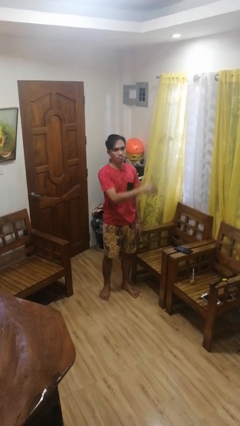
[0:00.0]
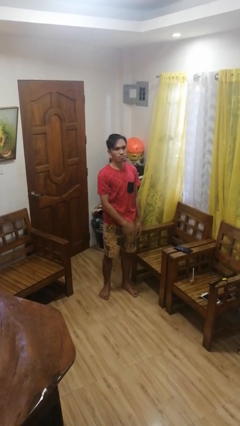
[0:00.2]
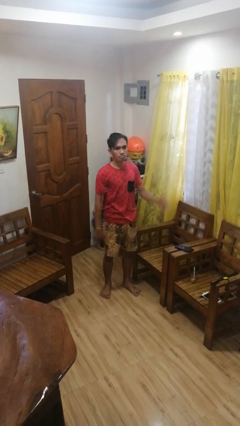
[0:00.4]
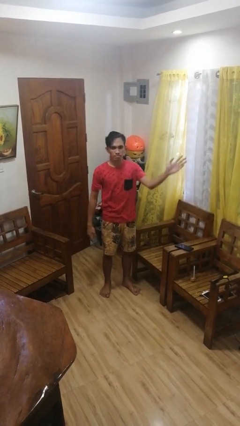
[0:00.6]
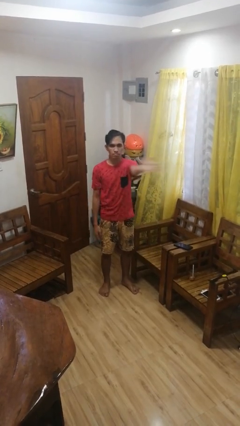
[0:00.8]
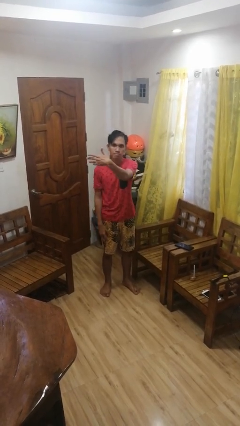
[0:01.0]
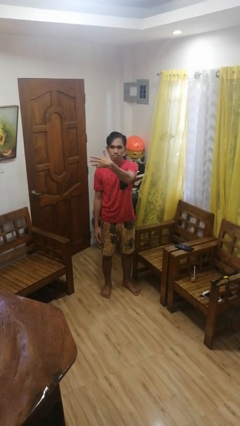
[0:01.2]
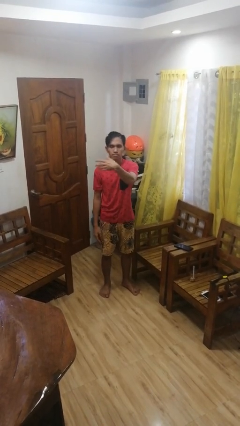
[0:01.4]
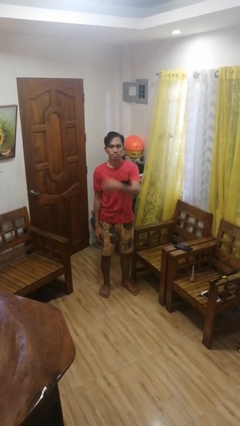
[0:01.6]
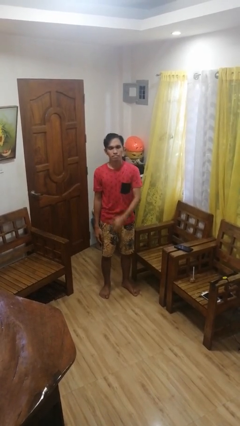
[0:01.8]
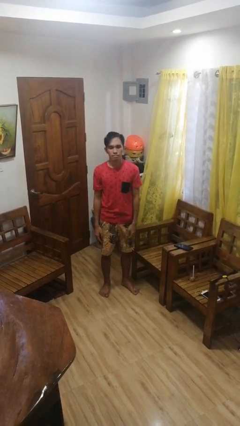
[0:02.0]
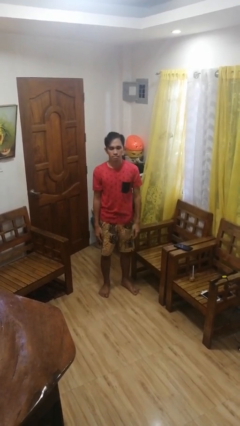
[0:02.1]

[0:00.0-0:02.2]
person gestures swipe right

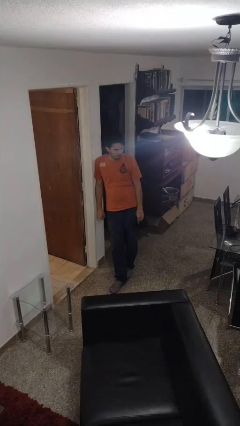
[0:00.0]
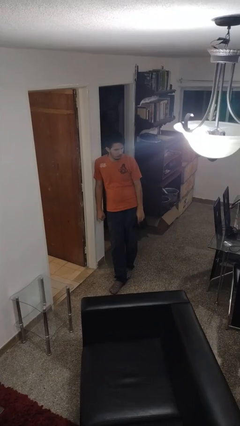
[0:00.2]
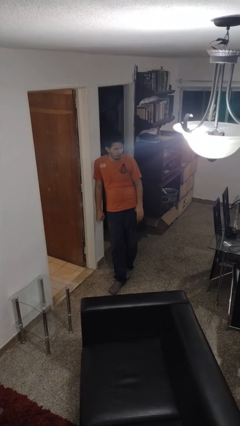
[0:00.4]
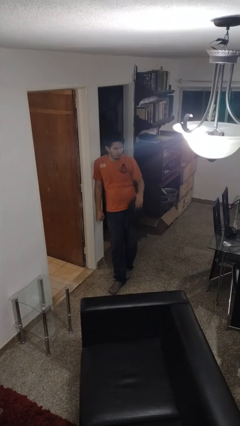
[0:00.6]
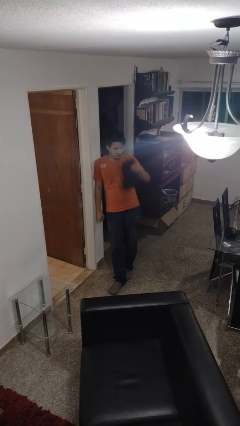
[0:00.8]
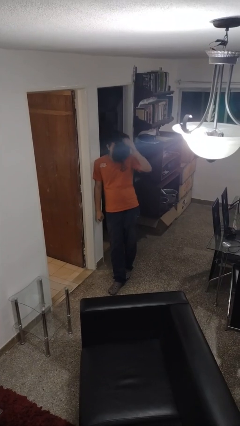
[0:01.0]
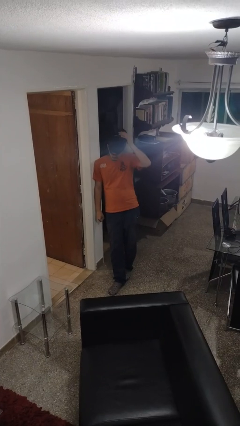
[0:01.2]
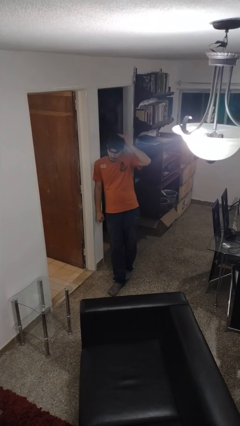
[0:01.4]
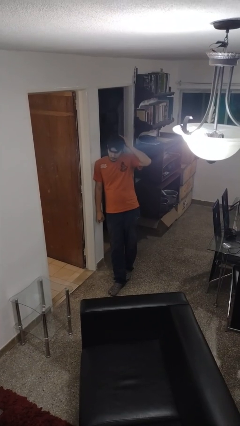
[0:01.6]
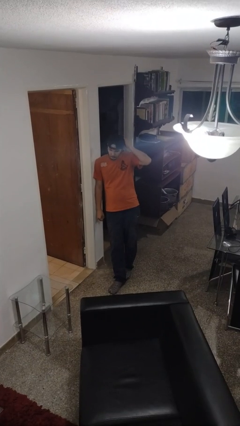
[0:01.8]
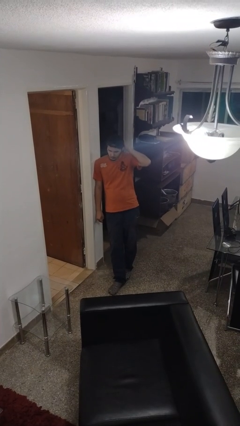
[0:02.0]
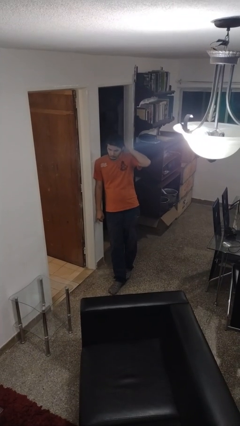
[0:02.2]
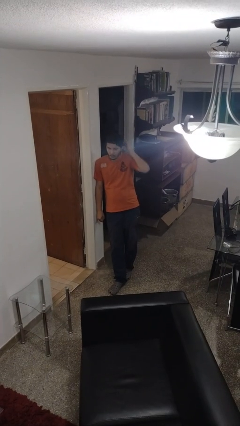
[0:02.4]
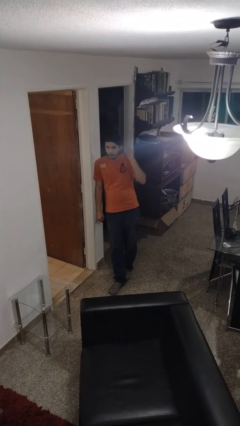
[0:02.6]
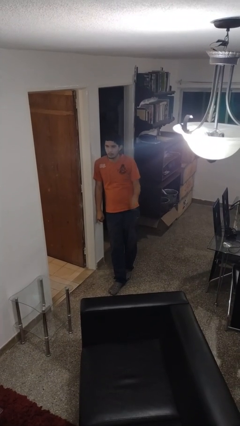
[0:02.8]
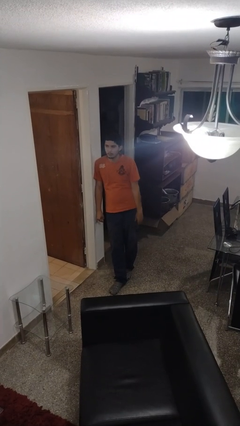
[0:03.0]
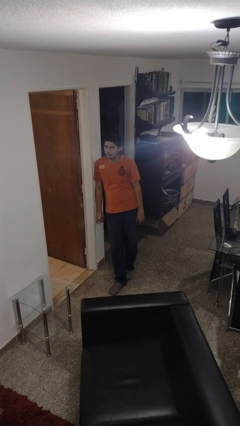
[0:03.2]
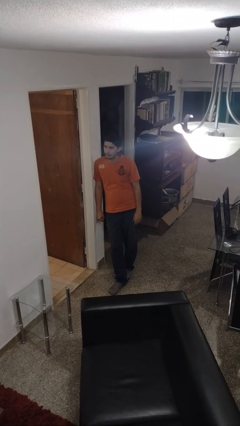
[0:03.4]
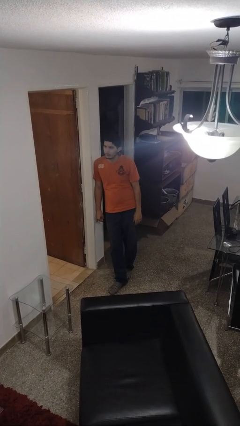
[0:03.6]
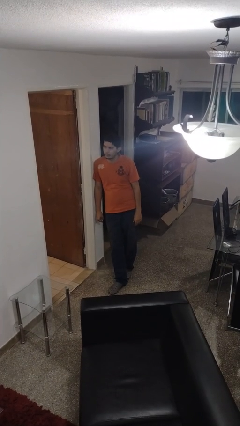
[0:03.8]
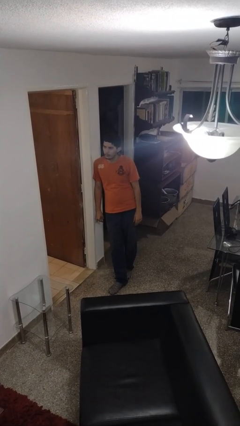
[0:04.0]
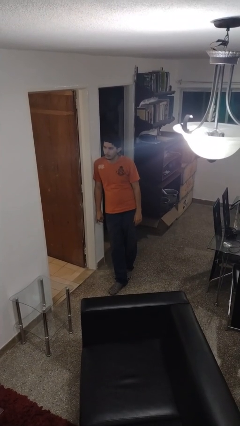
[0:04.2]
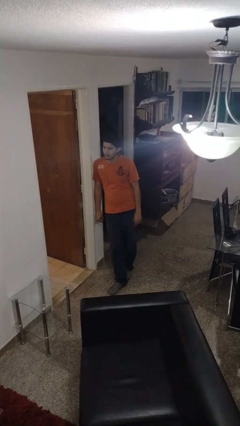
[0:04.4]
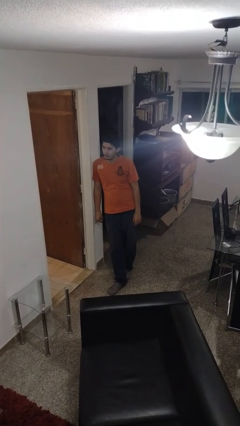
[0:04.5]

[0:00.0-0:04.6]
person puts on hat

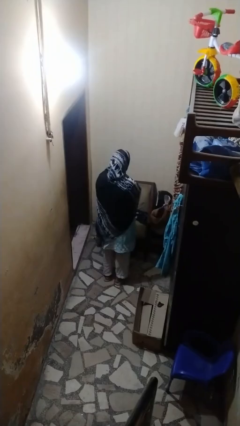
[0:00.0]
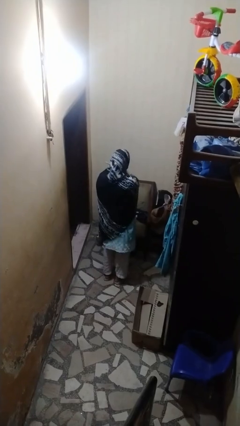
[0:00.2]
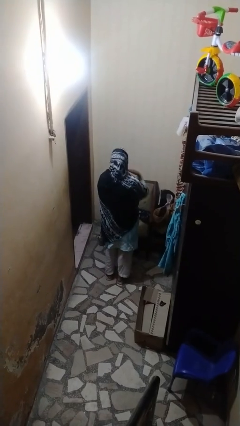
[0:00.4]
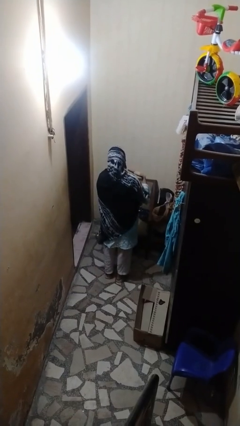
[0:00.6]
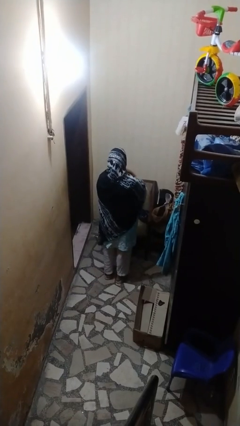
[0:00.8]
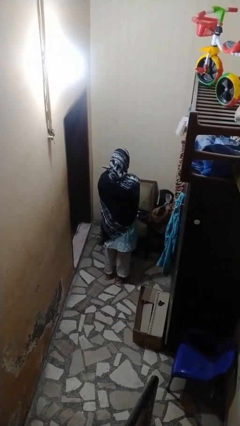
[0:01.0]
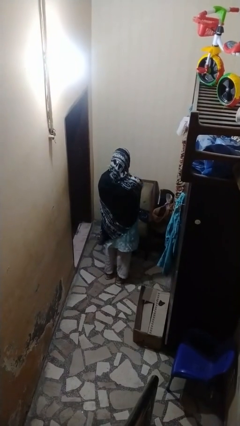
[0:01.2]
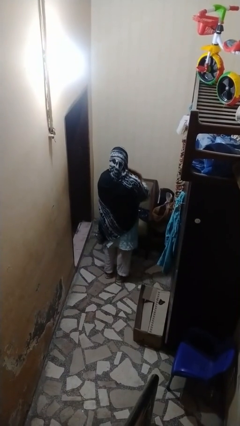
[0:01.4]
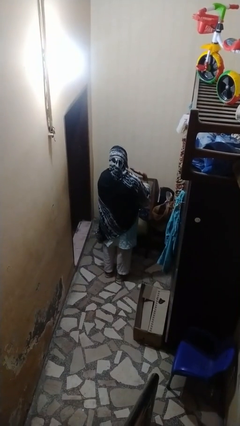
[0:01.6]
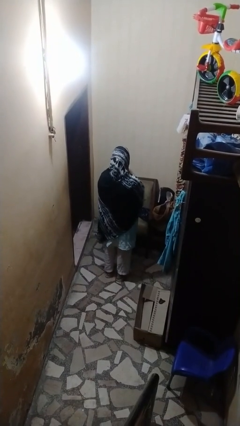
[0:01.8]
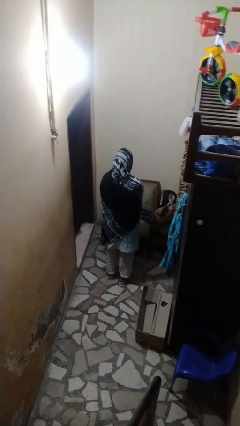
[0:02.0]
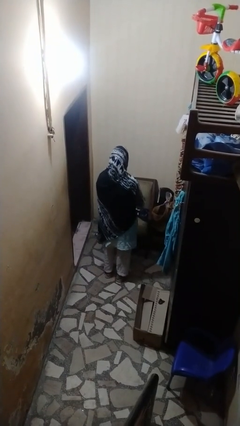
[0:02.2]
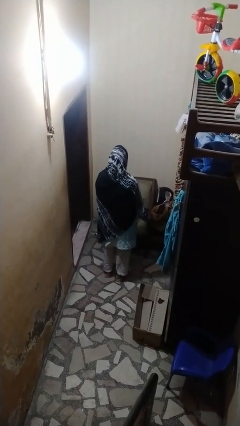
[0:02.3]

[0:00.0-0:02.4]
person gestures cut

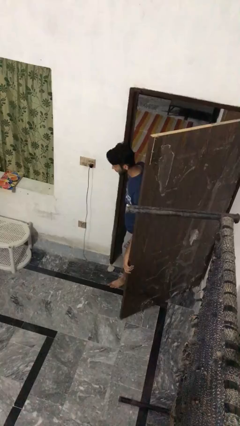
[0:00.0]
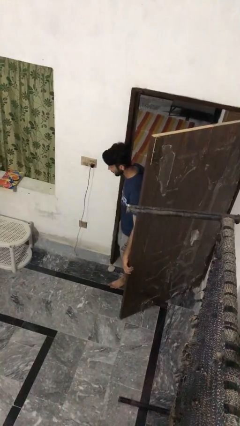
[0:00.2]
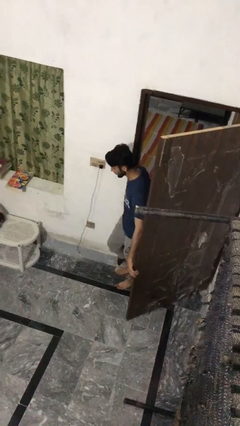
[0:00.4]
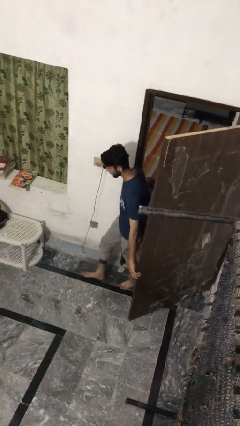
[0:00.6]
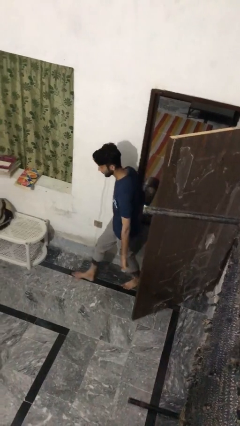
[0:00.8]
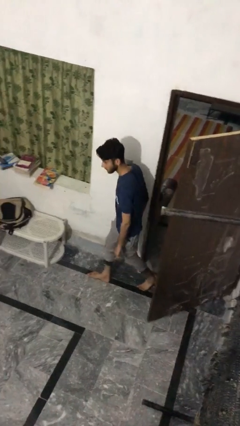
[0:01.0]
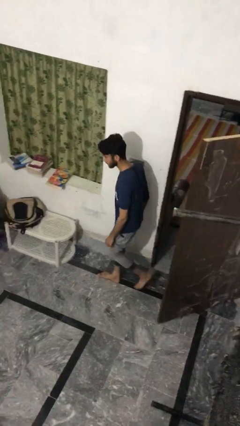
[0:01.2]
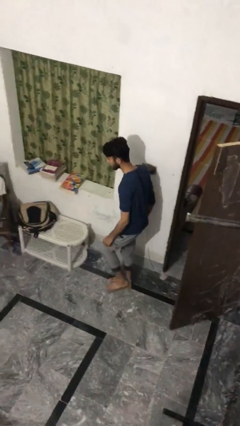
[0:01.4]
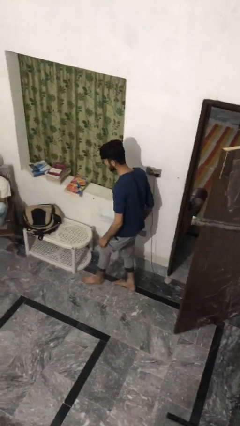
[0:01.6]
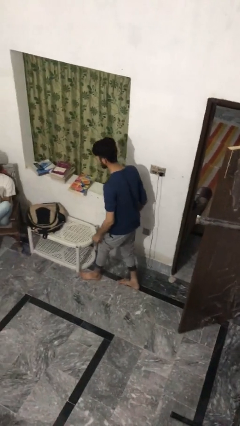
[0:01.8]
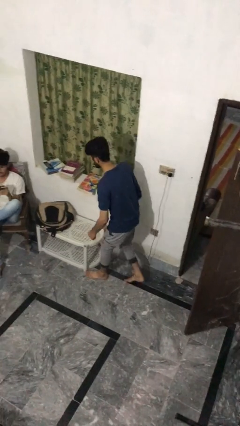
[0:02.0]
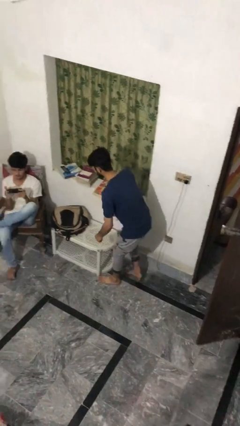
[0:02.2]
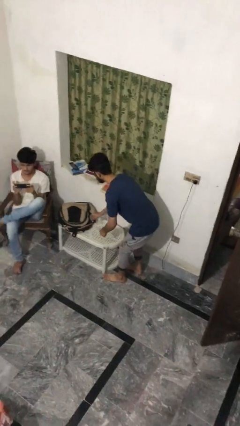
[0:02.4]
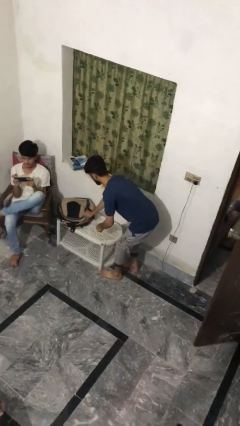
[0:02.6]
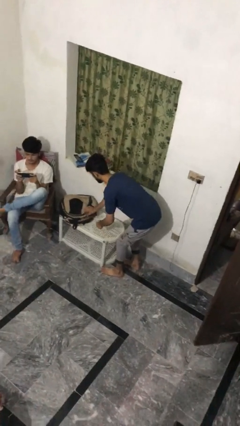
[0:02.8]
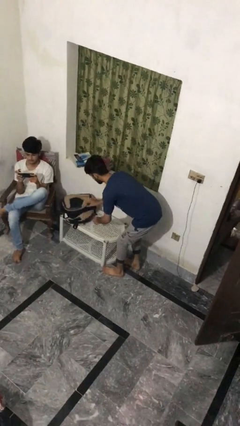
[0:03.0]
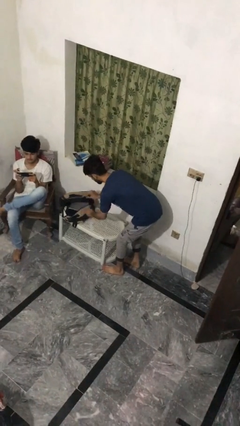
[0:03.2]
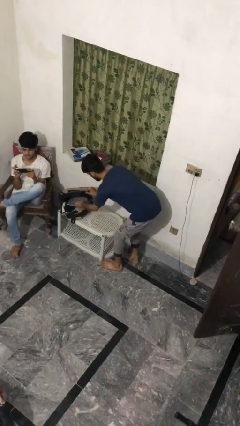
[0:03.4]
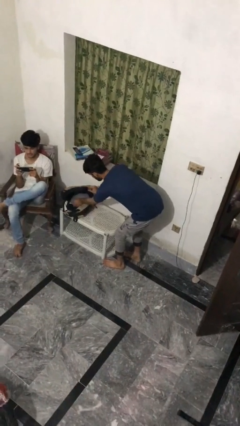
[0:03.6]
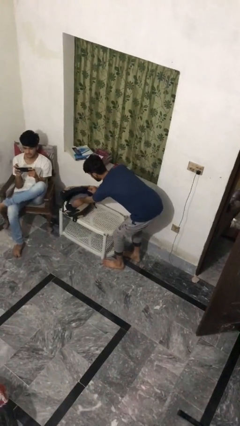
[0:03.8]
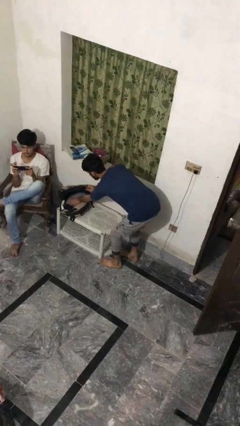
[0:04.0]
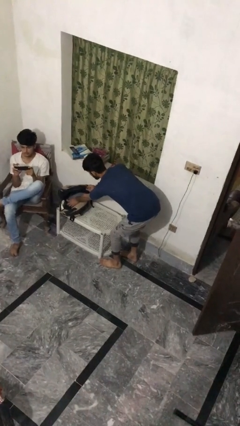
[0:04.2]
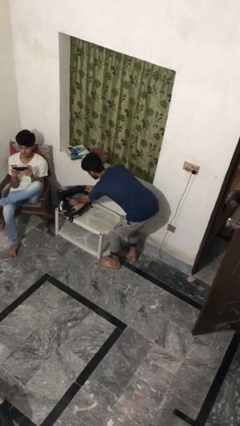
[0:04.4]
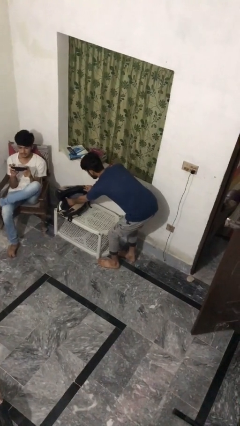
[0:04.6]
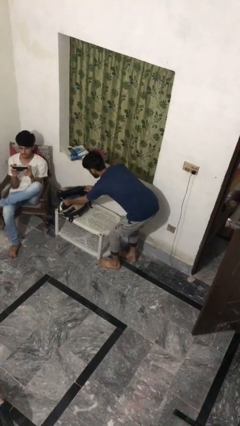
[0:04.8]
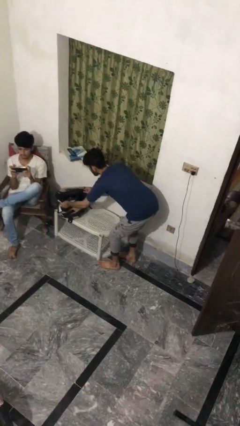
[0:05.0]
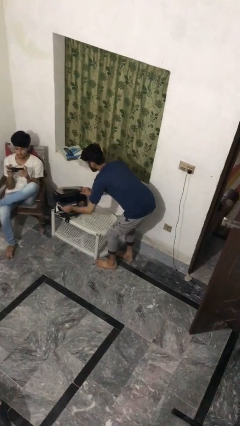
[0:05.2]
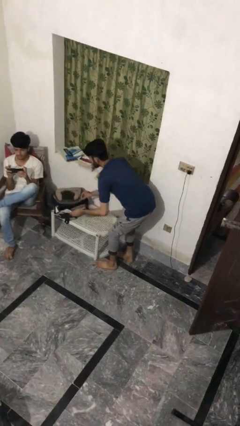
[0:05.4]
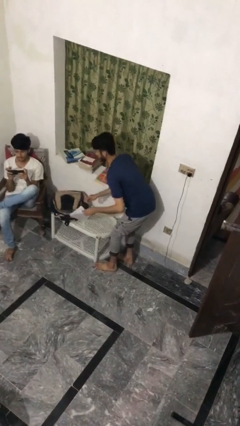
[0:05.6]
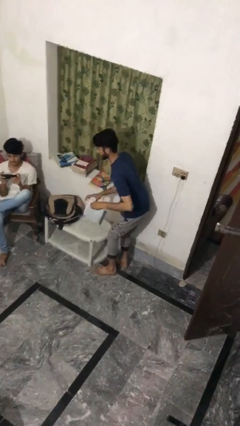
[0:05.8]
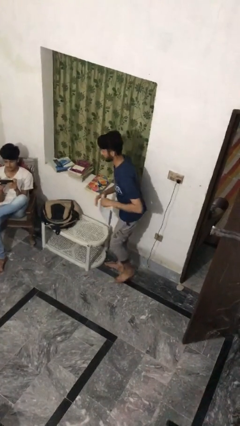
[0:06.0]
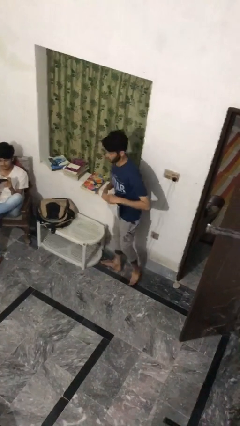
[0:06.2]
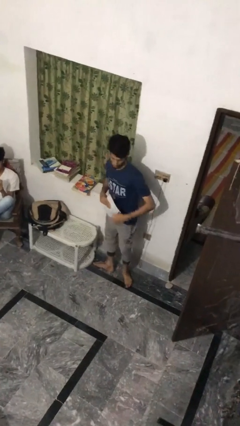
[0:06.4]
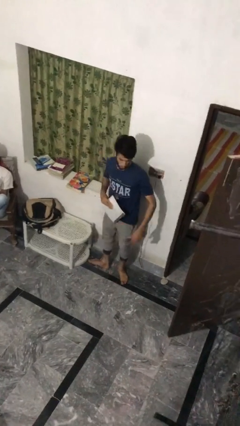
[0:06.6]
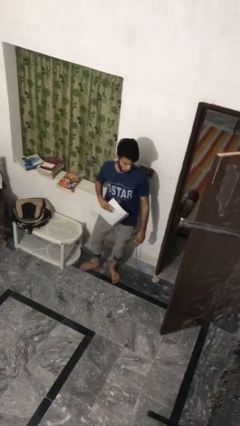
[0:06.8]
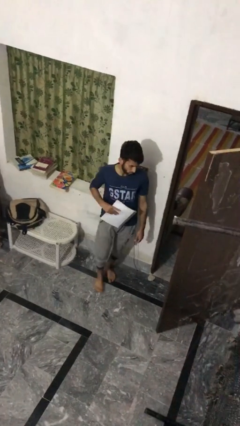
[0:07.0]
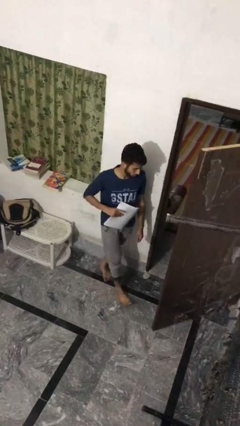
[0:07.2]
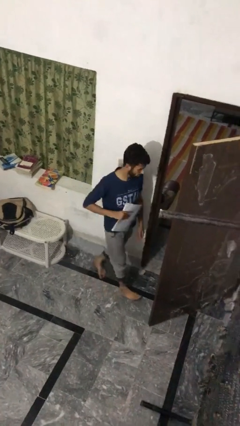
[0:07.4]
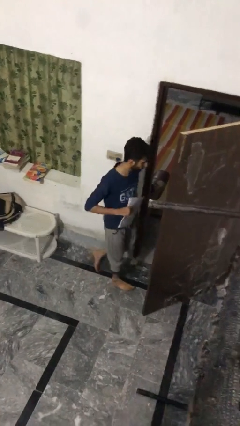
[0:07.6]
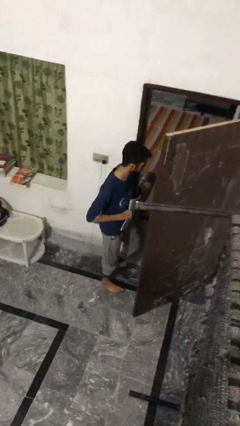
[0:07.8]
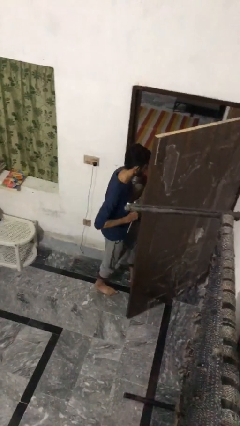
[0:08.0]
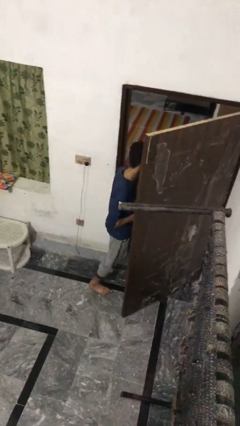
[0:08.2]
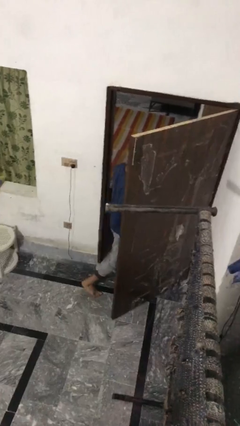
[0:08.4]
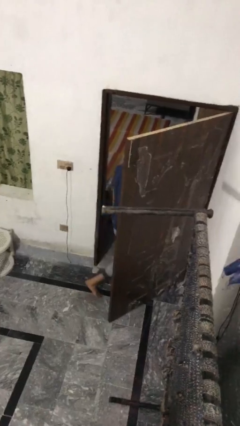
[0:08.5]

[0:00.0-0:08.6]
person steals object from person

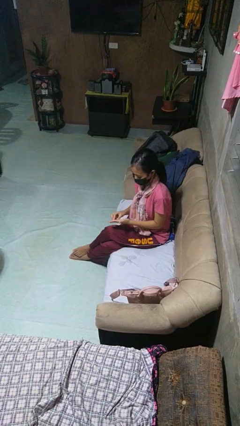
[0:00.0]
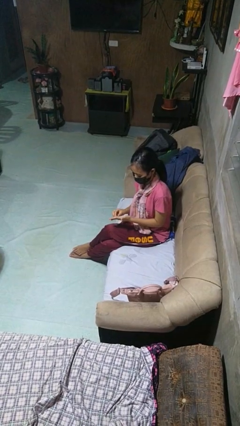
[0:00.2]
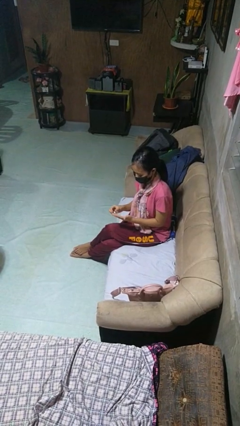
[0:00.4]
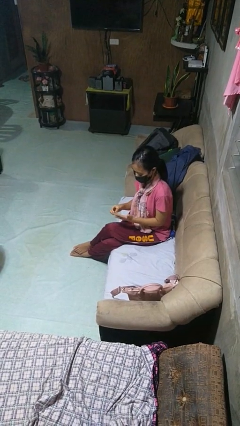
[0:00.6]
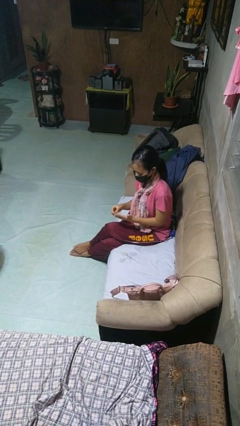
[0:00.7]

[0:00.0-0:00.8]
person puts on ring
